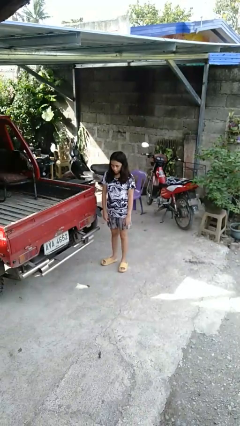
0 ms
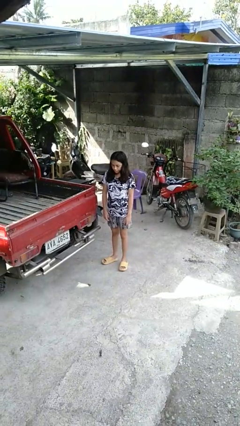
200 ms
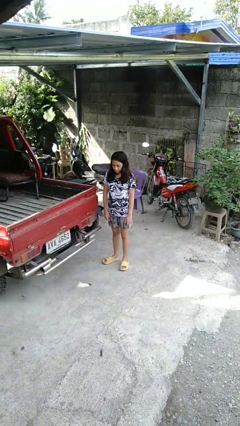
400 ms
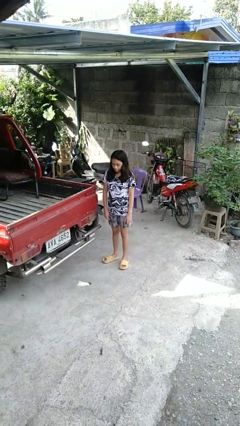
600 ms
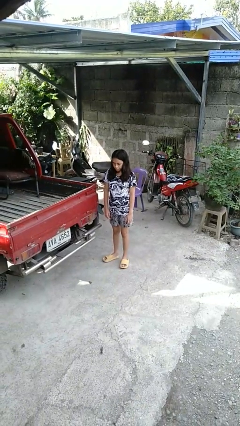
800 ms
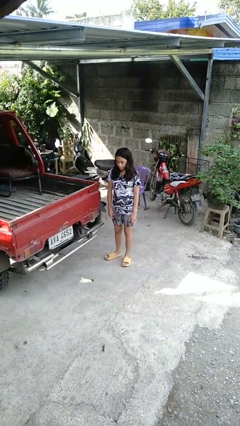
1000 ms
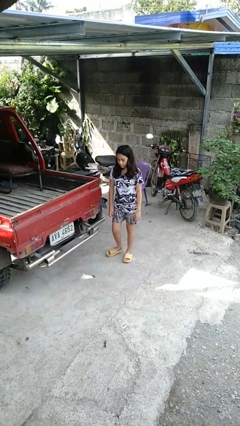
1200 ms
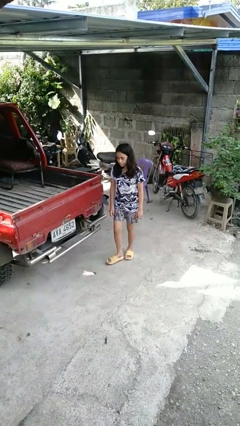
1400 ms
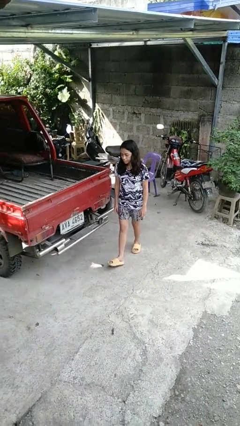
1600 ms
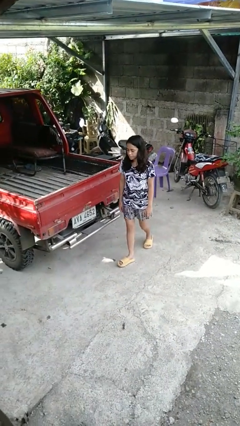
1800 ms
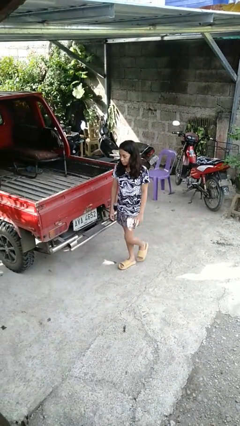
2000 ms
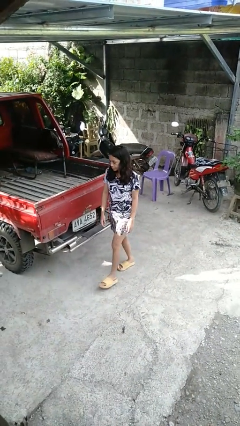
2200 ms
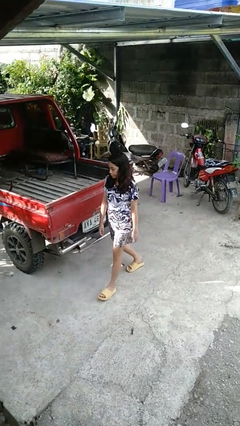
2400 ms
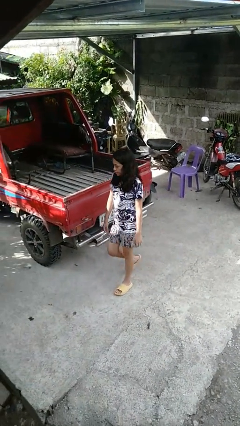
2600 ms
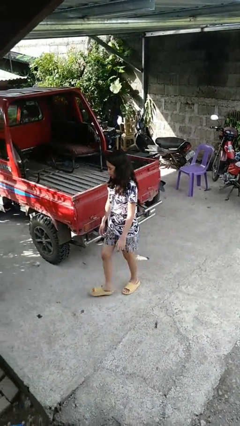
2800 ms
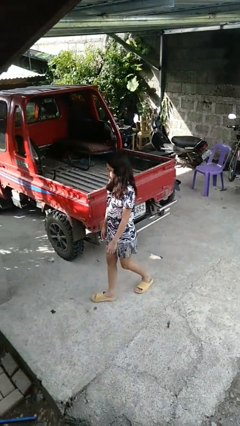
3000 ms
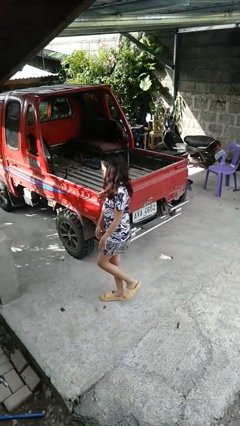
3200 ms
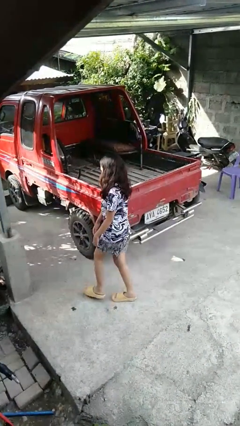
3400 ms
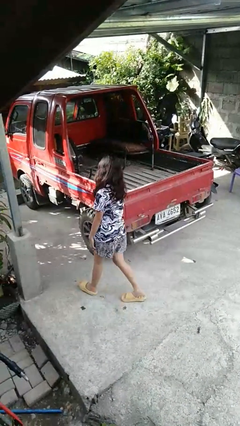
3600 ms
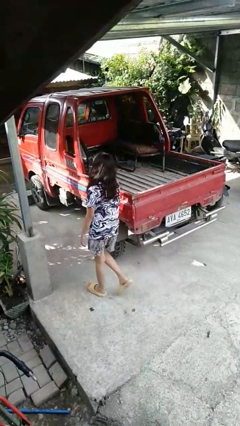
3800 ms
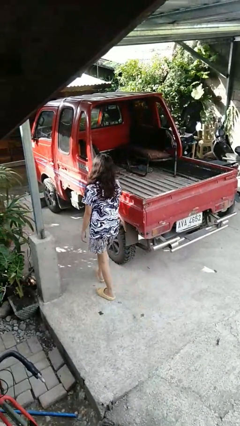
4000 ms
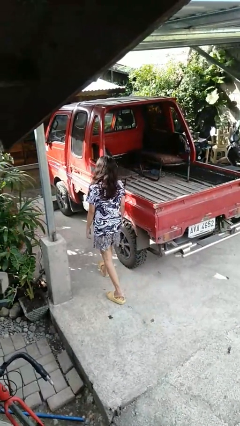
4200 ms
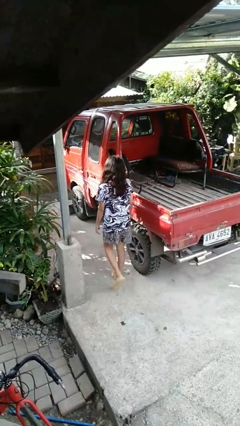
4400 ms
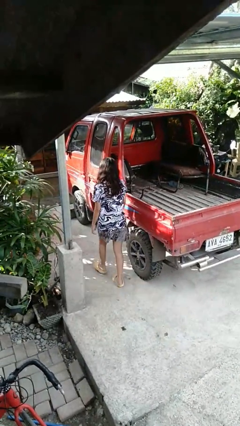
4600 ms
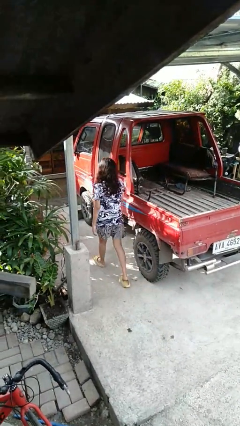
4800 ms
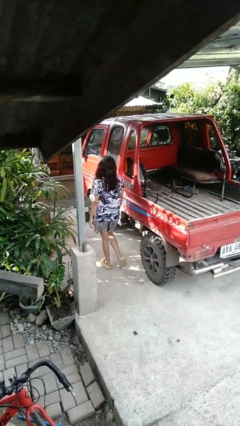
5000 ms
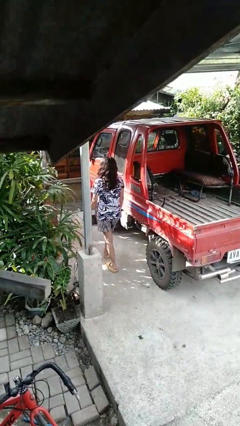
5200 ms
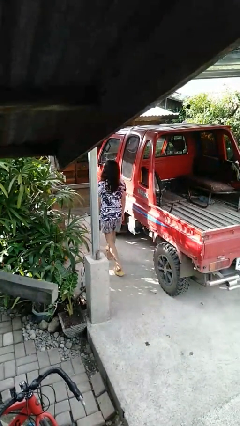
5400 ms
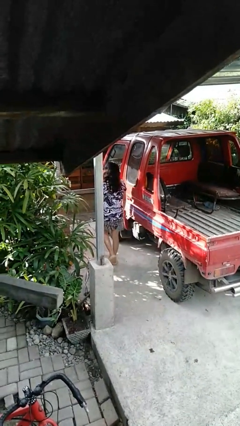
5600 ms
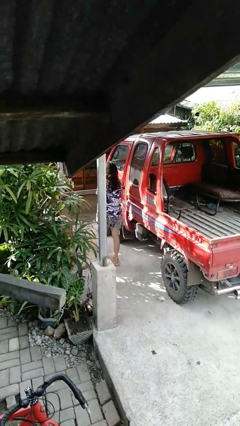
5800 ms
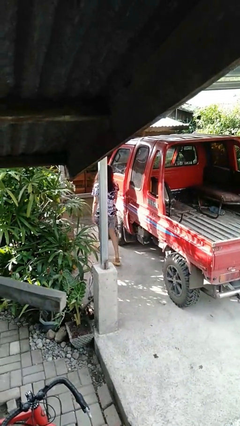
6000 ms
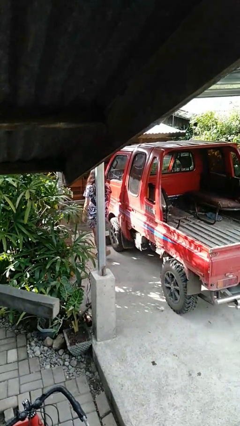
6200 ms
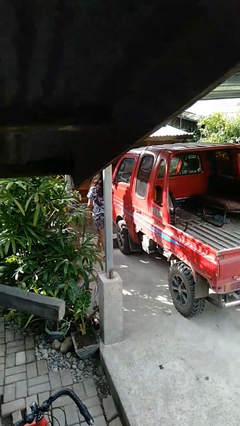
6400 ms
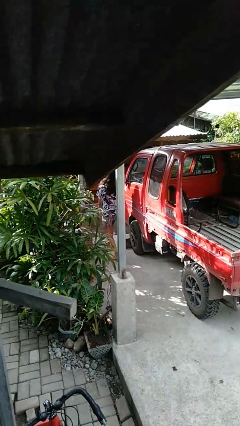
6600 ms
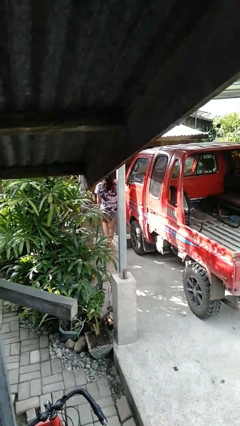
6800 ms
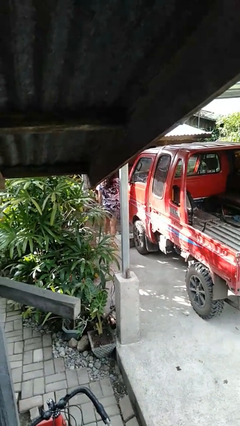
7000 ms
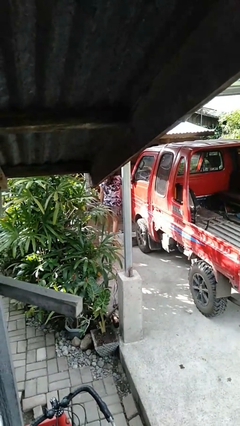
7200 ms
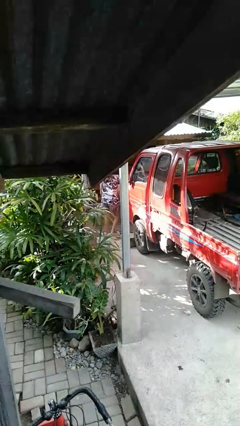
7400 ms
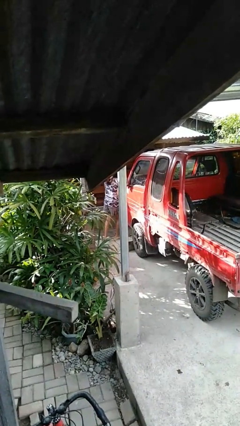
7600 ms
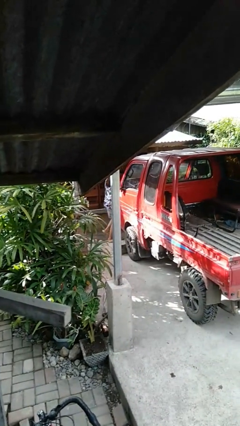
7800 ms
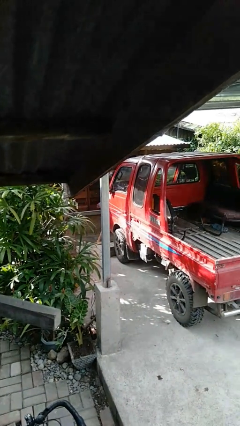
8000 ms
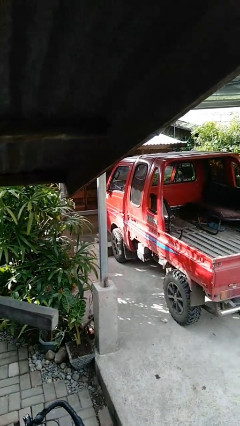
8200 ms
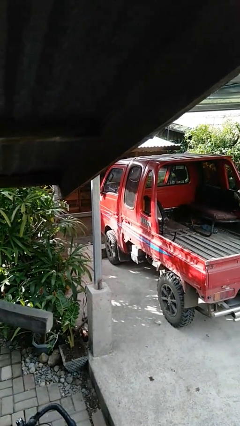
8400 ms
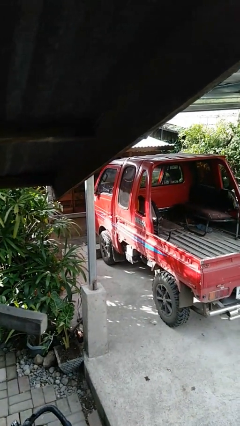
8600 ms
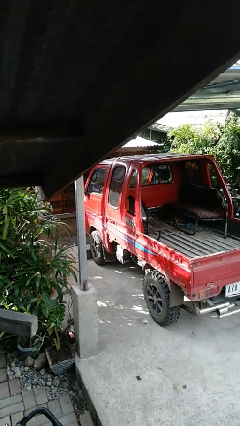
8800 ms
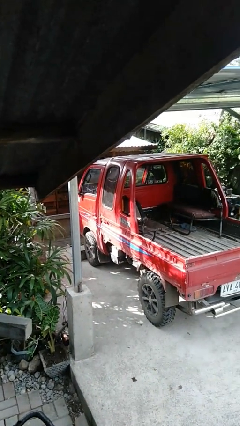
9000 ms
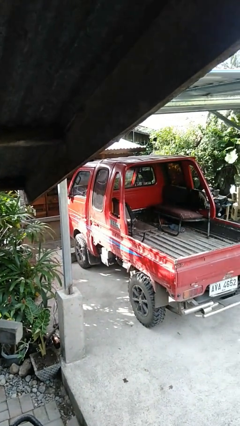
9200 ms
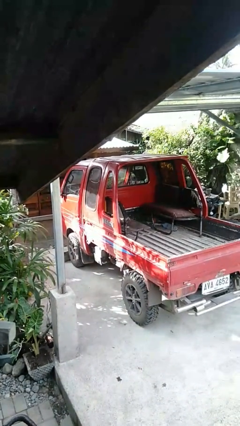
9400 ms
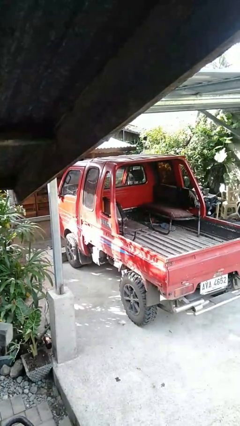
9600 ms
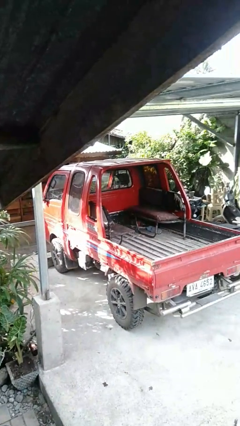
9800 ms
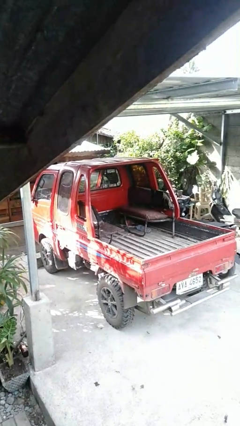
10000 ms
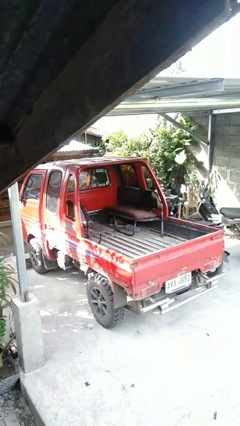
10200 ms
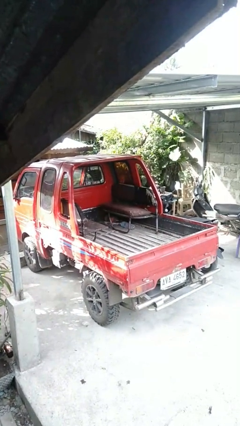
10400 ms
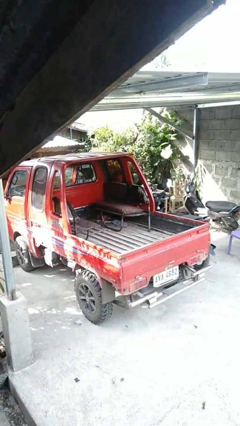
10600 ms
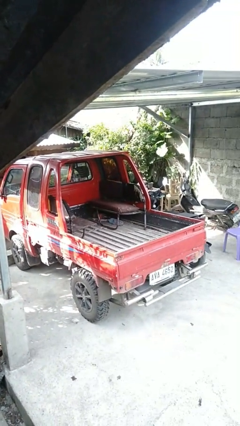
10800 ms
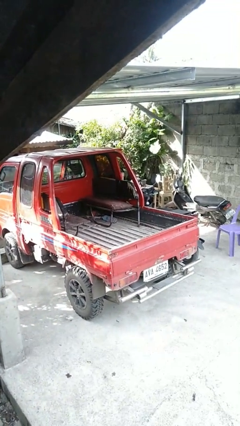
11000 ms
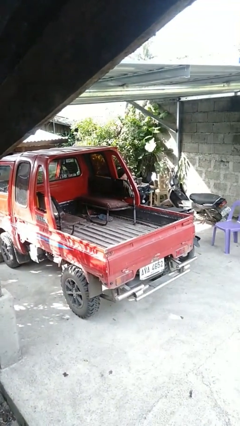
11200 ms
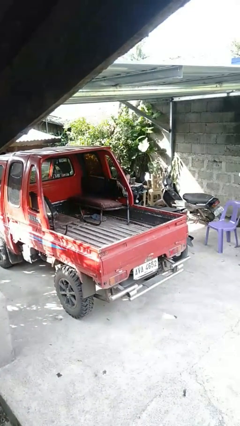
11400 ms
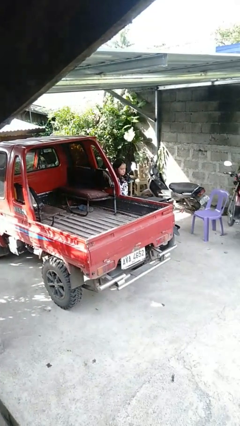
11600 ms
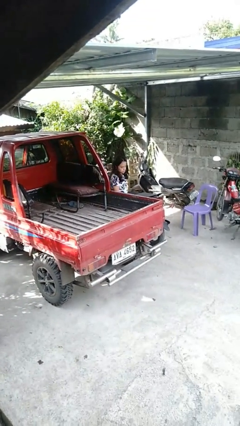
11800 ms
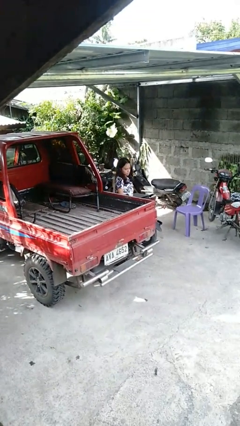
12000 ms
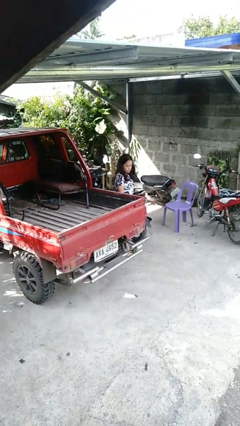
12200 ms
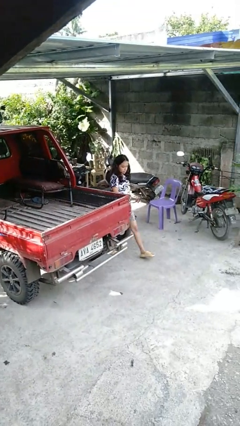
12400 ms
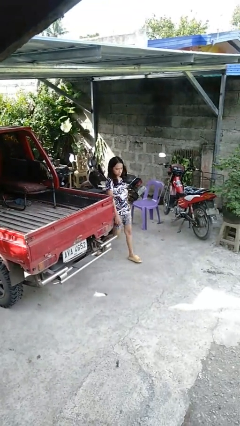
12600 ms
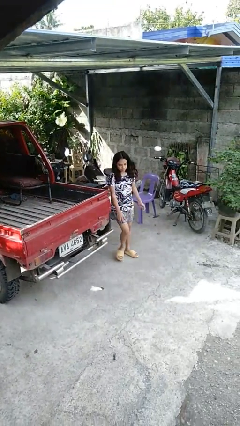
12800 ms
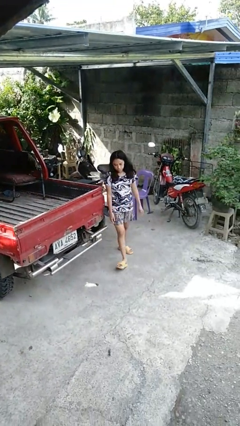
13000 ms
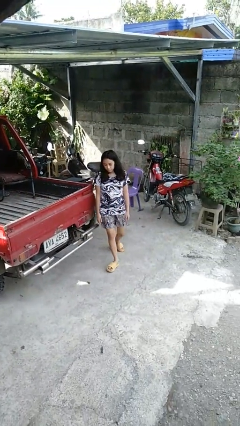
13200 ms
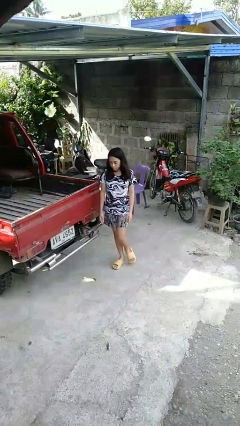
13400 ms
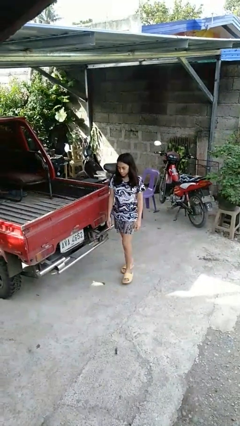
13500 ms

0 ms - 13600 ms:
person walks around car

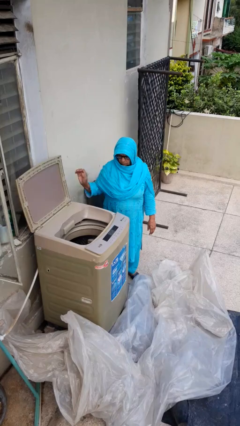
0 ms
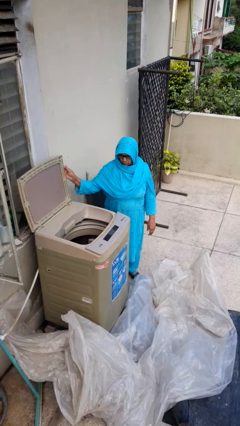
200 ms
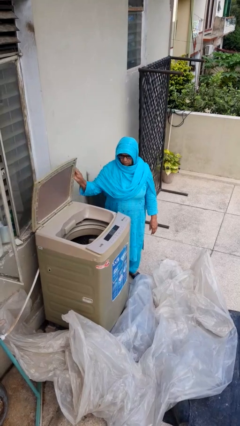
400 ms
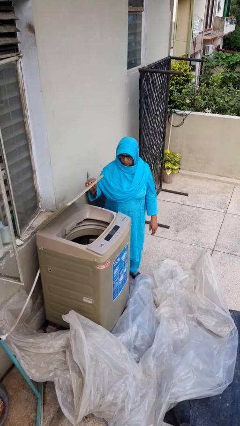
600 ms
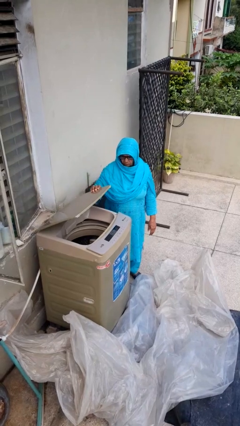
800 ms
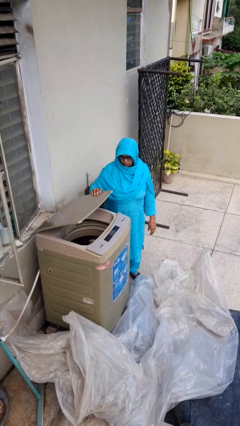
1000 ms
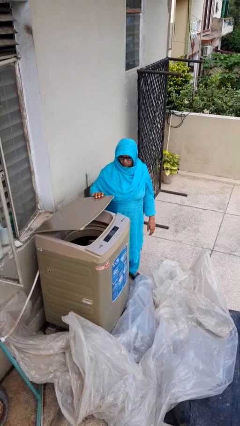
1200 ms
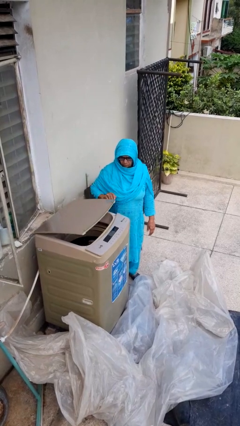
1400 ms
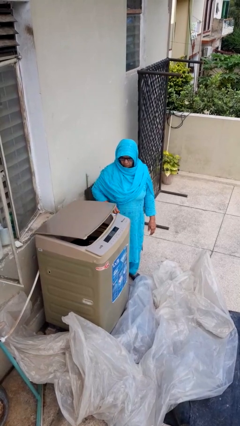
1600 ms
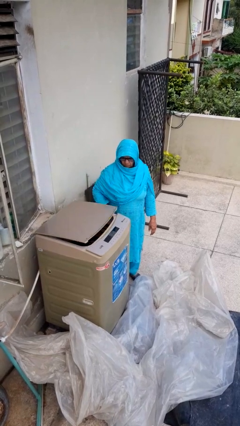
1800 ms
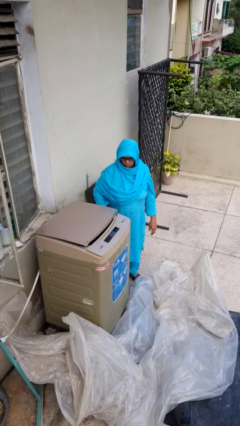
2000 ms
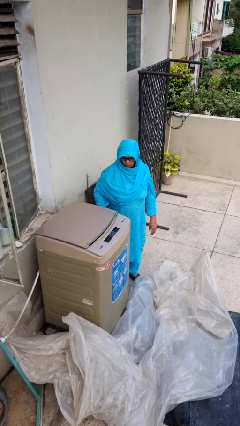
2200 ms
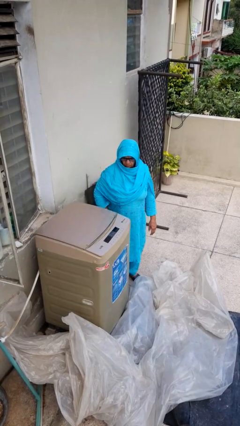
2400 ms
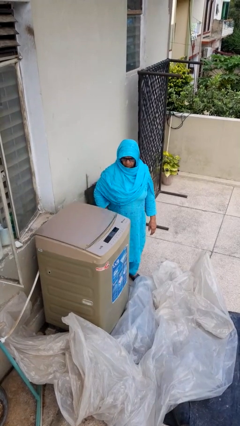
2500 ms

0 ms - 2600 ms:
person closes clothes washer

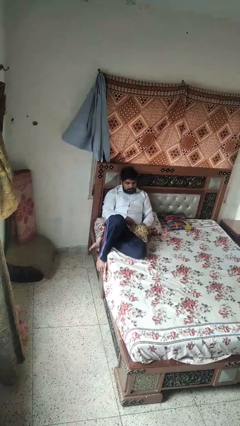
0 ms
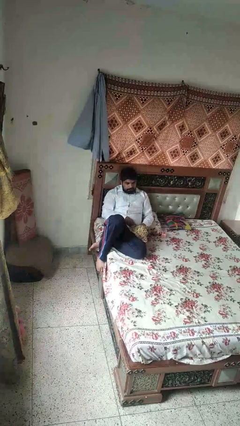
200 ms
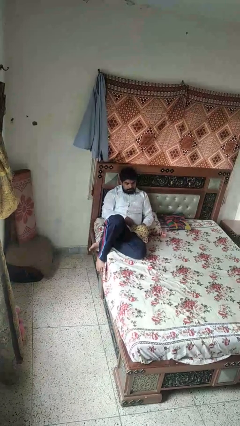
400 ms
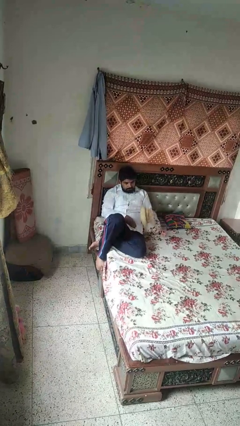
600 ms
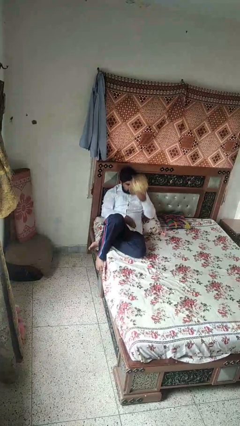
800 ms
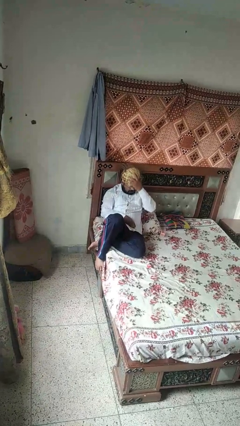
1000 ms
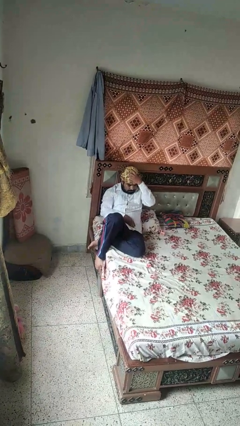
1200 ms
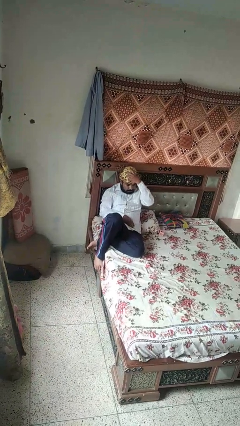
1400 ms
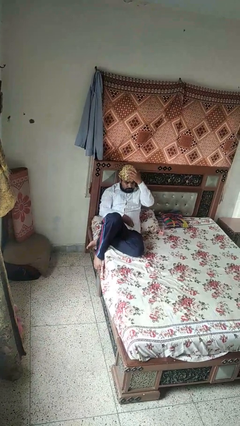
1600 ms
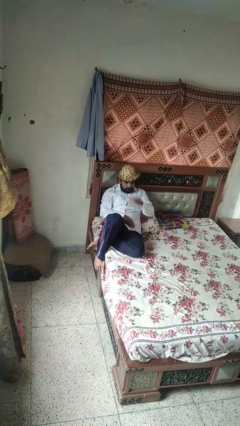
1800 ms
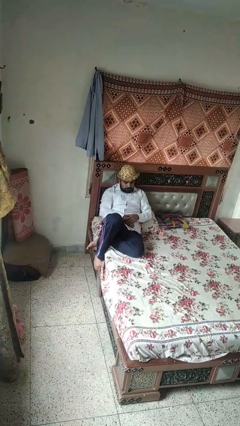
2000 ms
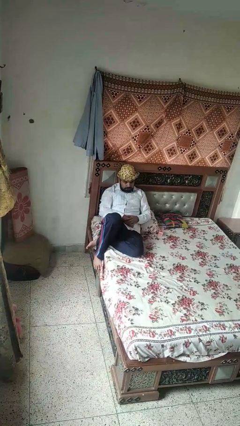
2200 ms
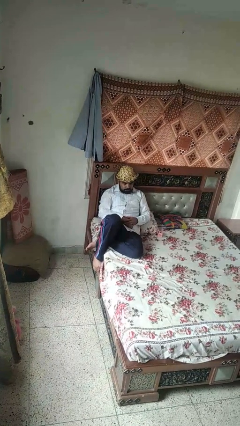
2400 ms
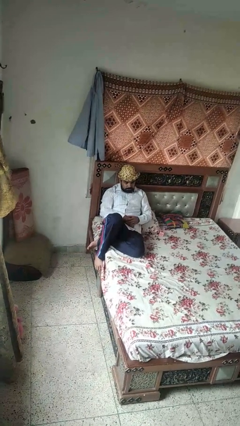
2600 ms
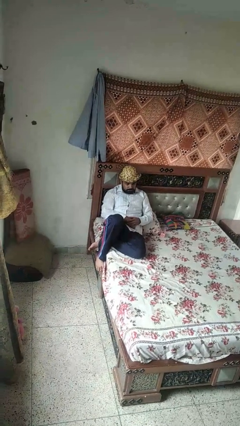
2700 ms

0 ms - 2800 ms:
person puts on hat
